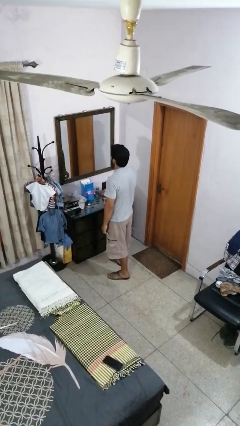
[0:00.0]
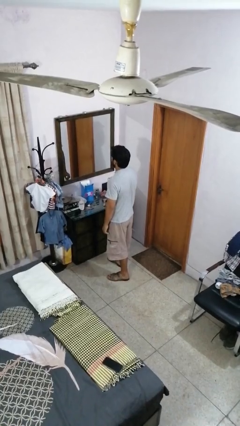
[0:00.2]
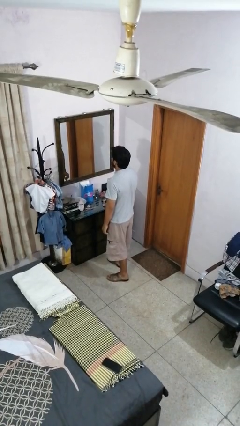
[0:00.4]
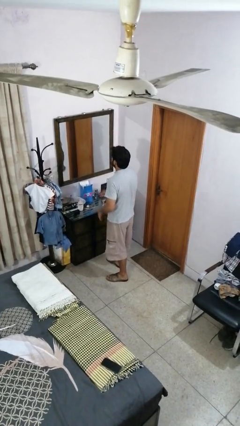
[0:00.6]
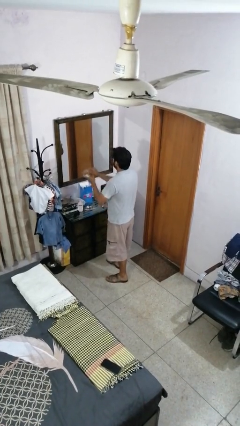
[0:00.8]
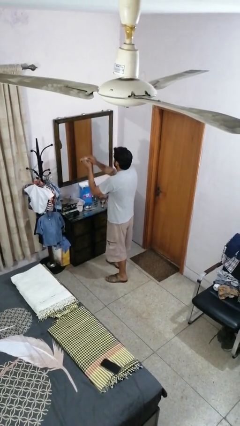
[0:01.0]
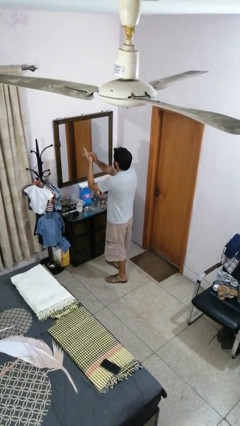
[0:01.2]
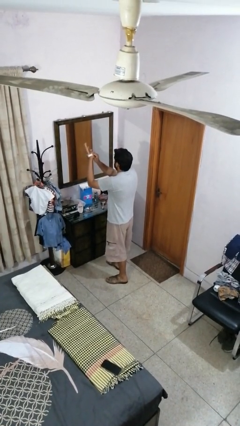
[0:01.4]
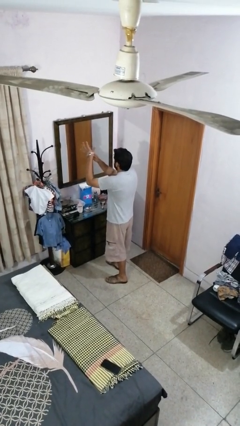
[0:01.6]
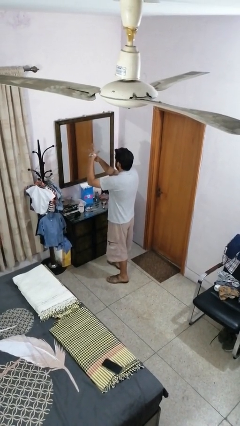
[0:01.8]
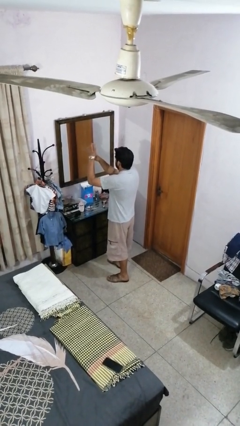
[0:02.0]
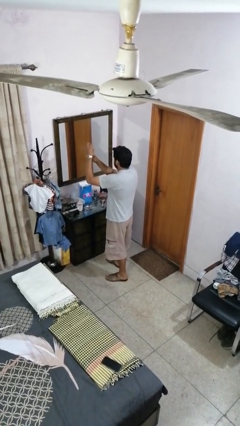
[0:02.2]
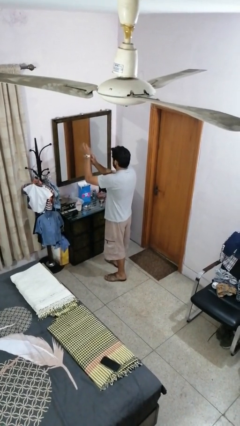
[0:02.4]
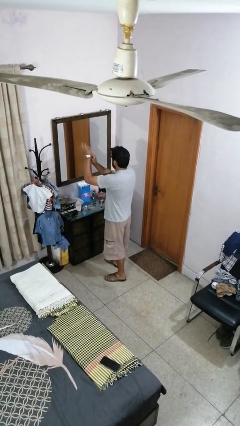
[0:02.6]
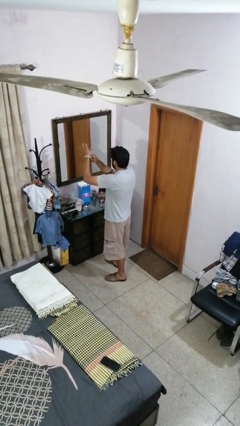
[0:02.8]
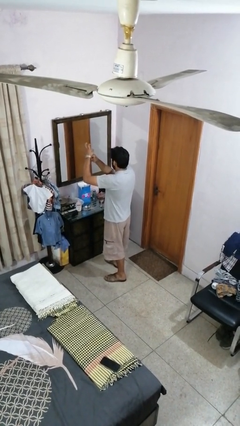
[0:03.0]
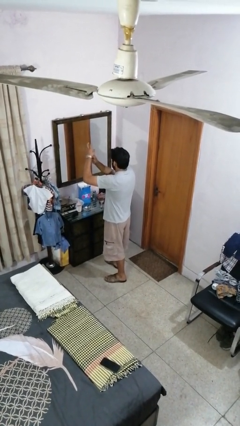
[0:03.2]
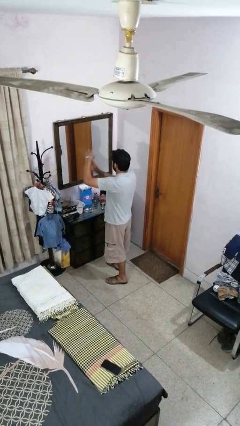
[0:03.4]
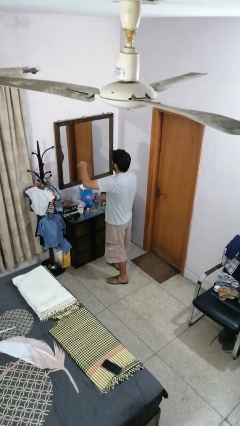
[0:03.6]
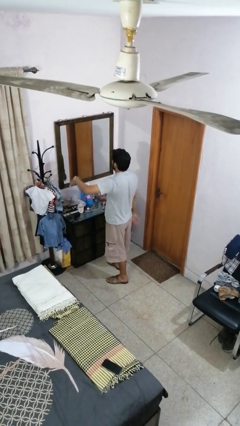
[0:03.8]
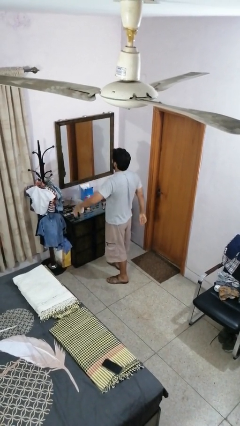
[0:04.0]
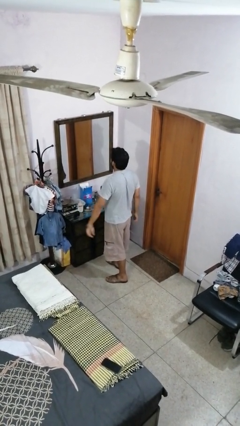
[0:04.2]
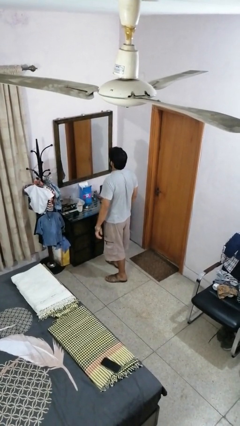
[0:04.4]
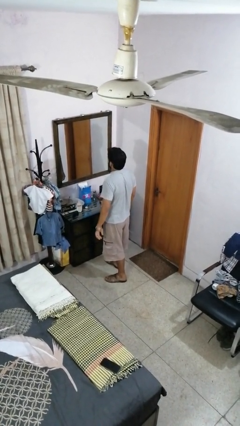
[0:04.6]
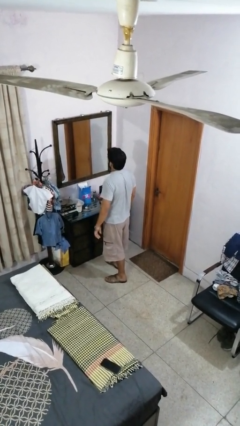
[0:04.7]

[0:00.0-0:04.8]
person puts on wristwatch

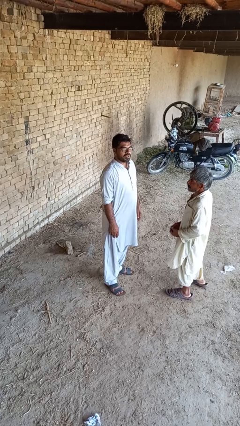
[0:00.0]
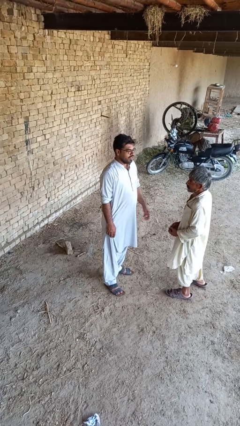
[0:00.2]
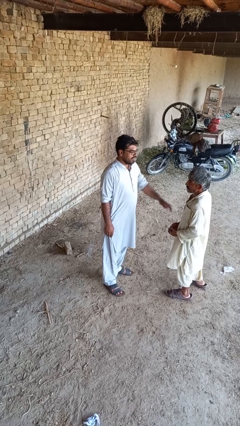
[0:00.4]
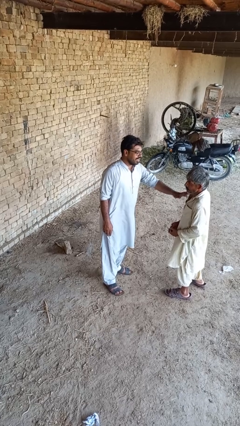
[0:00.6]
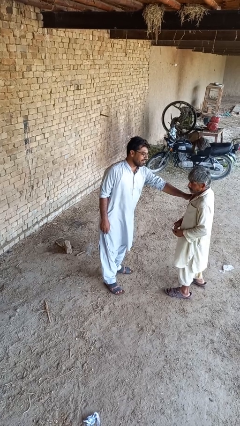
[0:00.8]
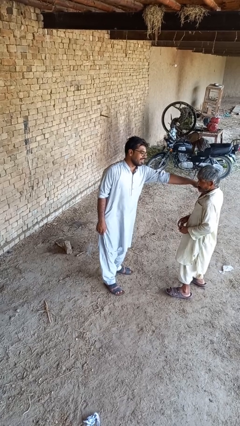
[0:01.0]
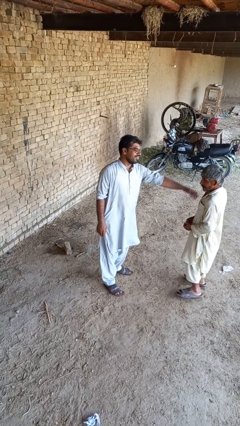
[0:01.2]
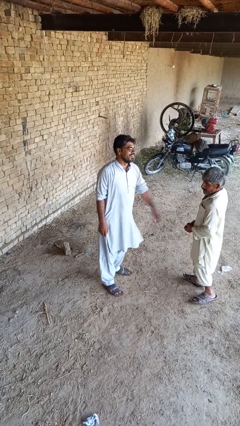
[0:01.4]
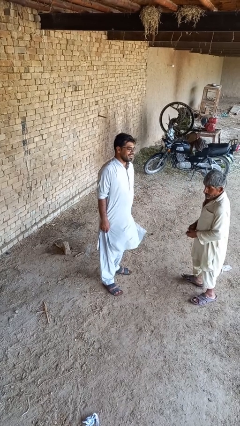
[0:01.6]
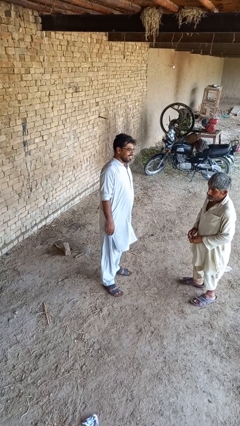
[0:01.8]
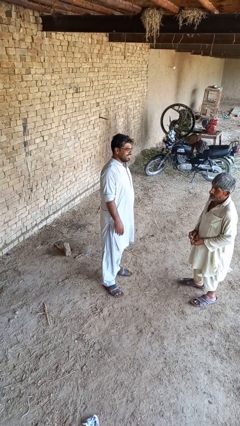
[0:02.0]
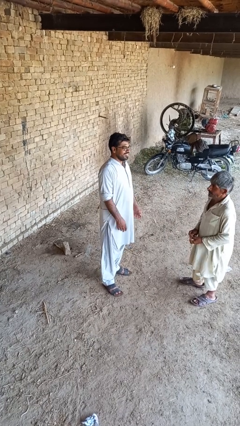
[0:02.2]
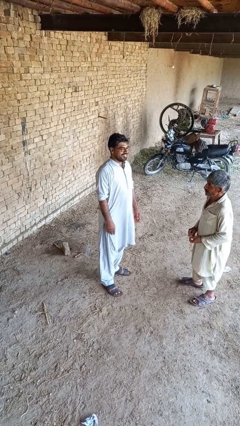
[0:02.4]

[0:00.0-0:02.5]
person shoves person

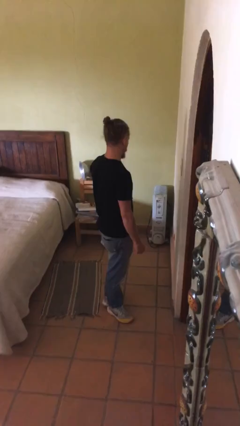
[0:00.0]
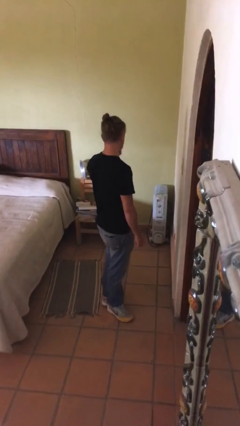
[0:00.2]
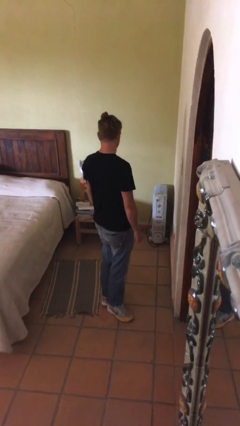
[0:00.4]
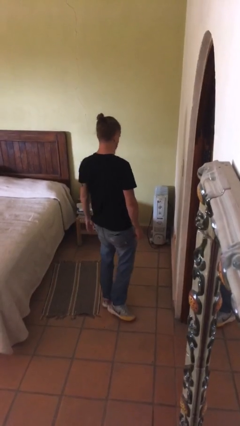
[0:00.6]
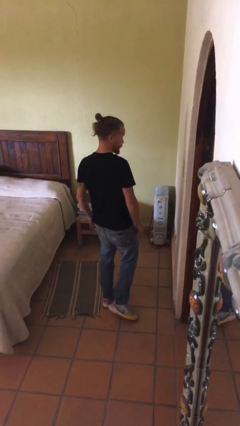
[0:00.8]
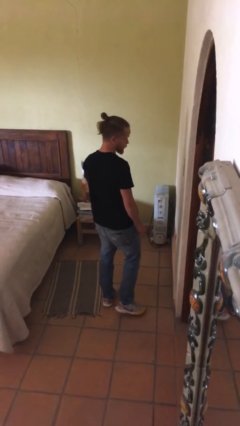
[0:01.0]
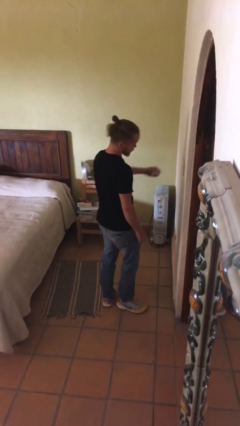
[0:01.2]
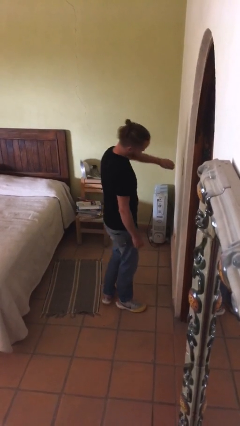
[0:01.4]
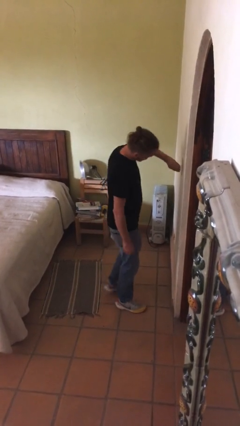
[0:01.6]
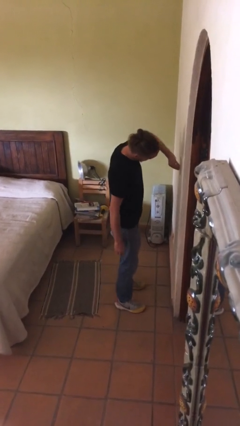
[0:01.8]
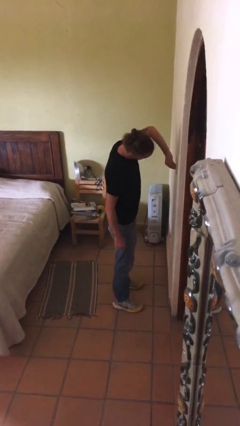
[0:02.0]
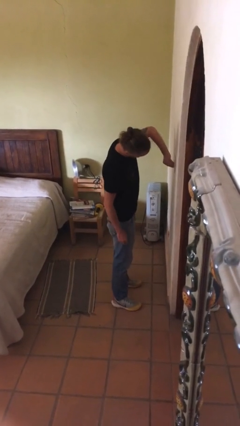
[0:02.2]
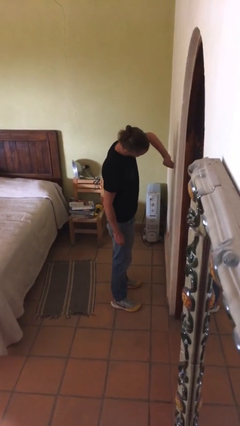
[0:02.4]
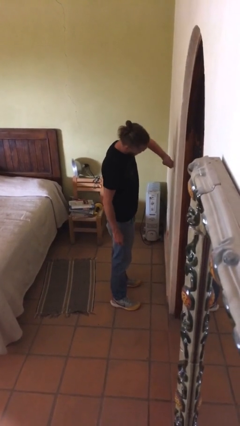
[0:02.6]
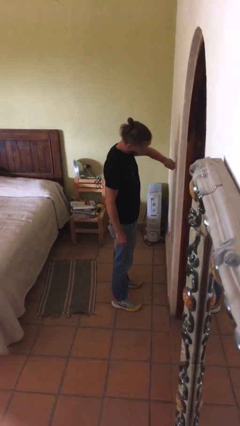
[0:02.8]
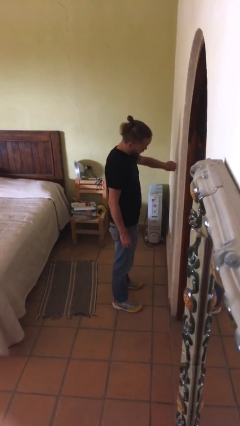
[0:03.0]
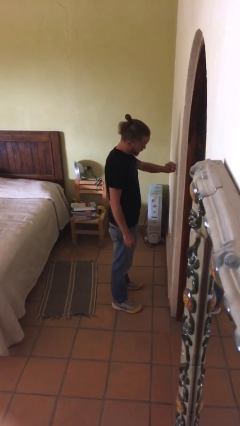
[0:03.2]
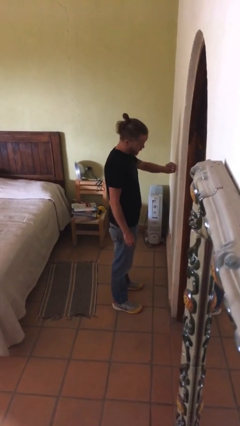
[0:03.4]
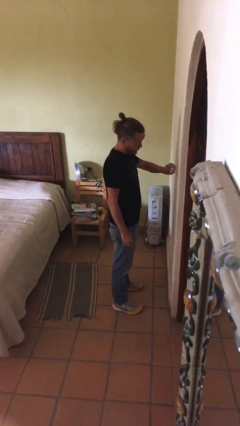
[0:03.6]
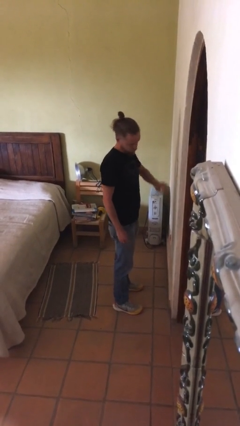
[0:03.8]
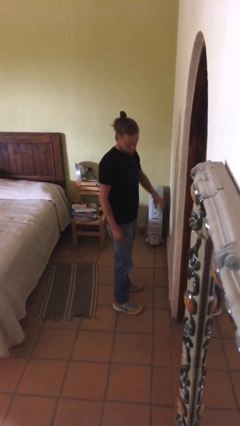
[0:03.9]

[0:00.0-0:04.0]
person adjusts thermostat

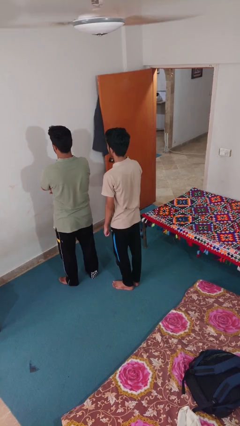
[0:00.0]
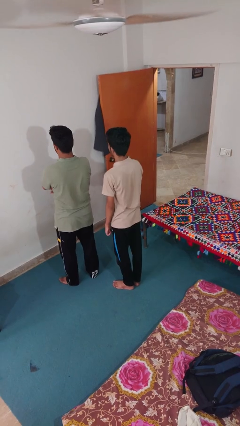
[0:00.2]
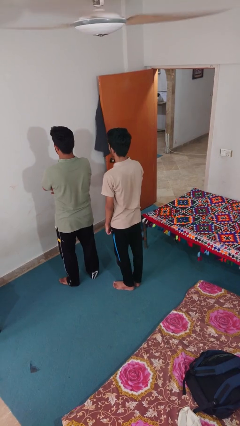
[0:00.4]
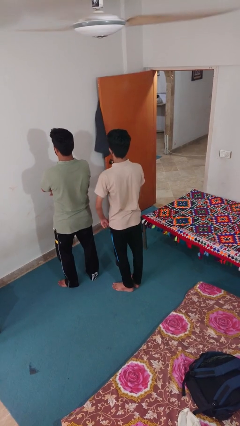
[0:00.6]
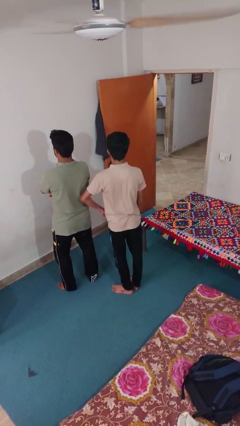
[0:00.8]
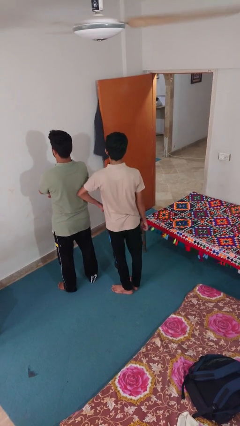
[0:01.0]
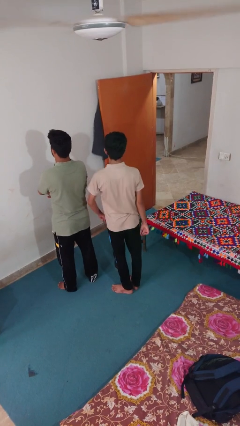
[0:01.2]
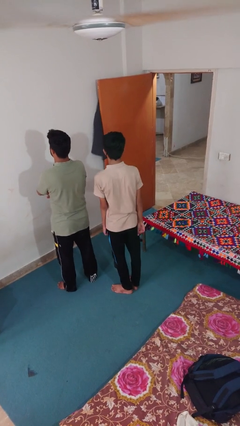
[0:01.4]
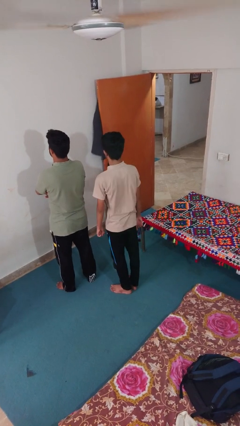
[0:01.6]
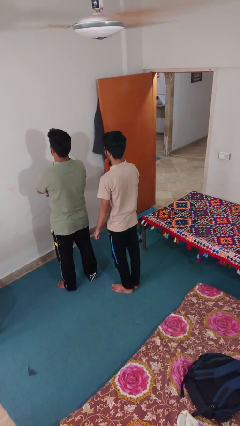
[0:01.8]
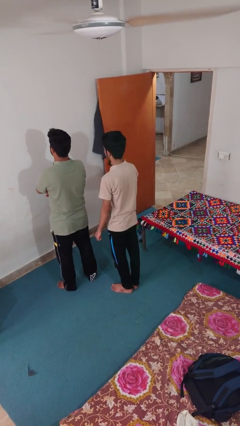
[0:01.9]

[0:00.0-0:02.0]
person nudges person with elbow

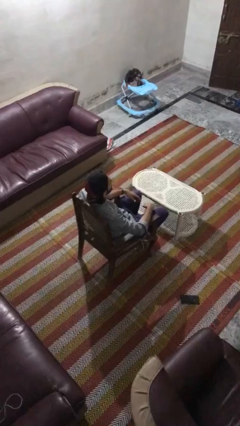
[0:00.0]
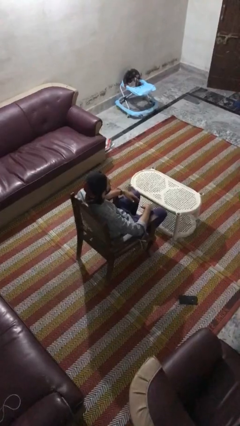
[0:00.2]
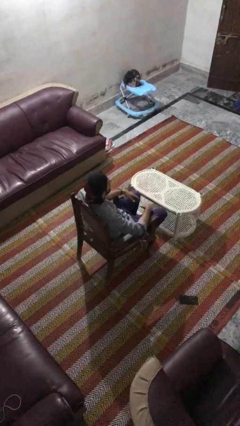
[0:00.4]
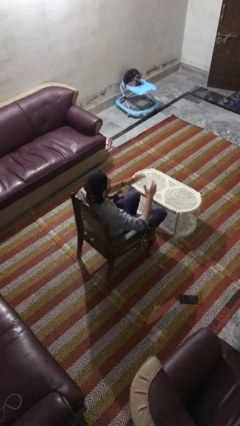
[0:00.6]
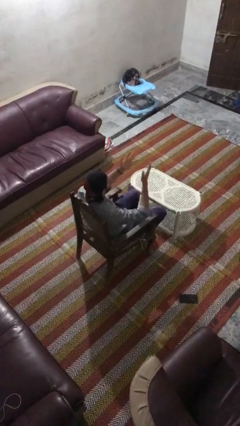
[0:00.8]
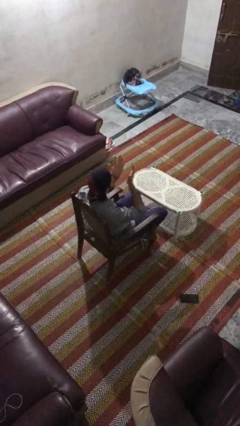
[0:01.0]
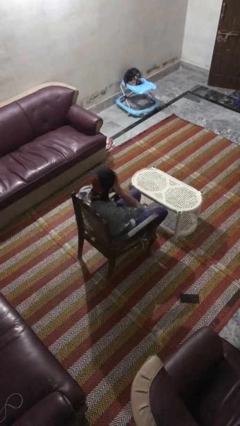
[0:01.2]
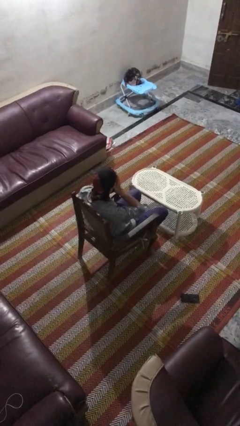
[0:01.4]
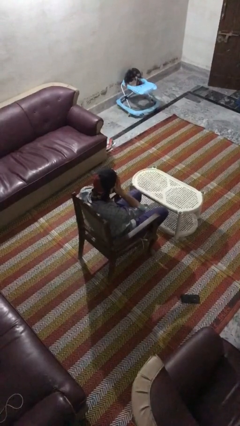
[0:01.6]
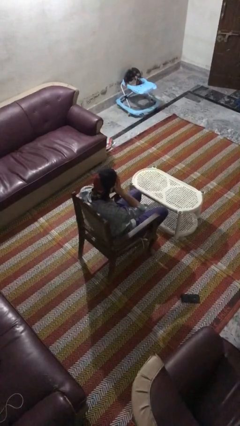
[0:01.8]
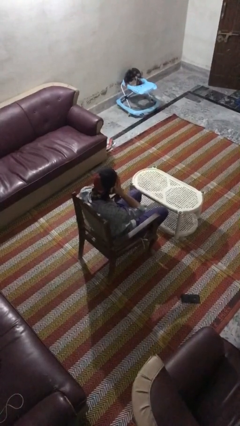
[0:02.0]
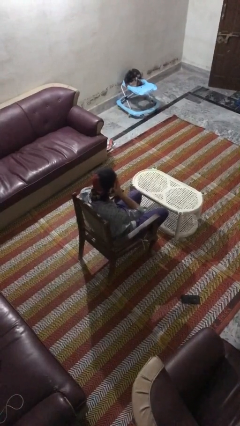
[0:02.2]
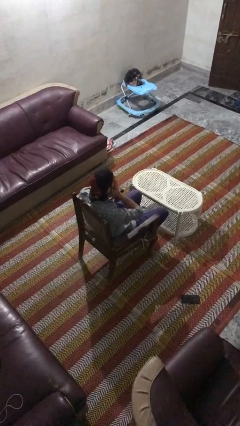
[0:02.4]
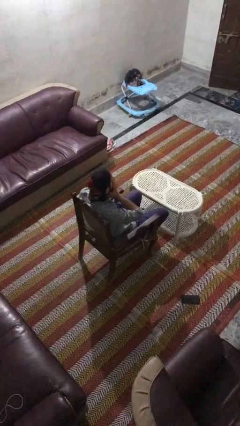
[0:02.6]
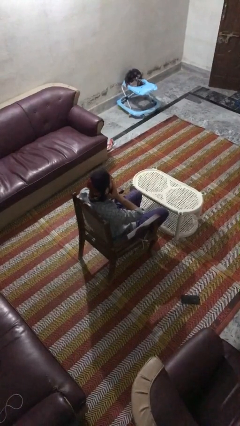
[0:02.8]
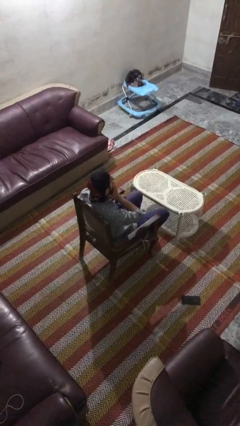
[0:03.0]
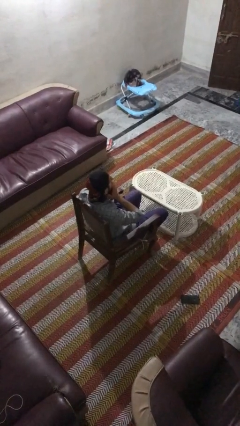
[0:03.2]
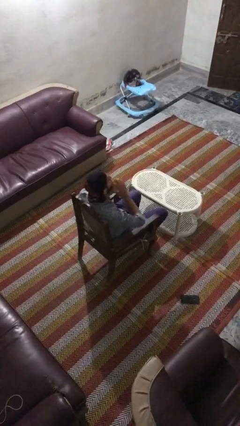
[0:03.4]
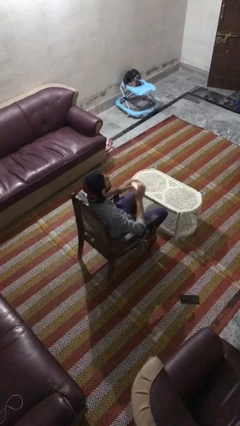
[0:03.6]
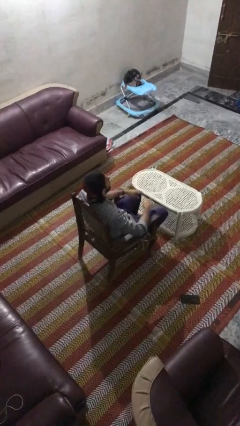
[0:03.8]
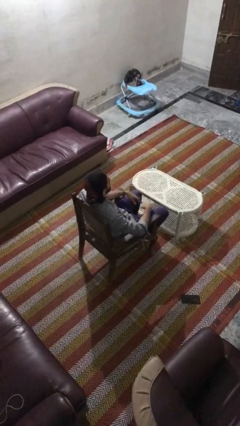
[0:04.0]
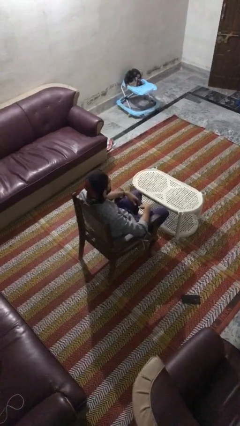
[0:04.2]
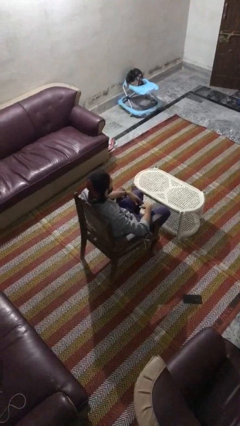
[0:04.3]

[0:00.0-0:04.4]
person covers face with hands
